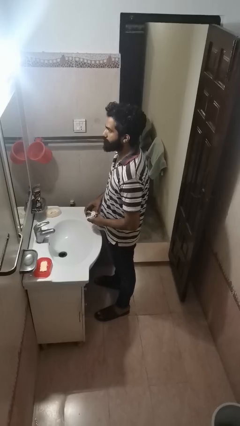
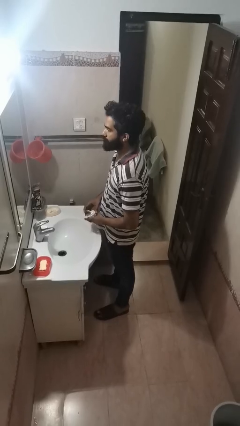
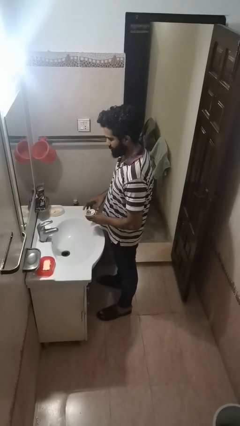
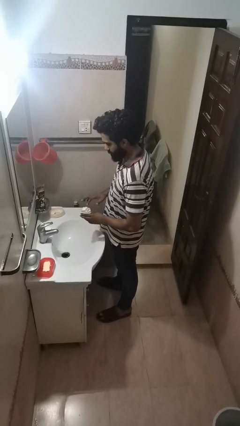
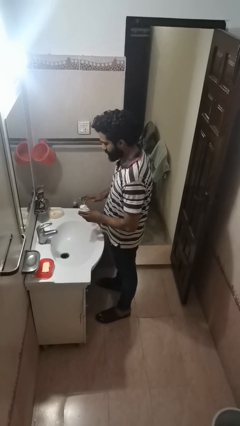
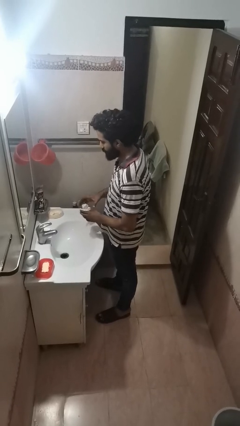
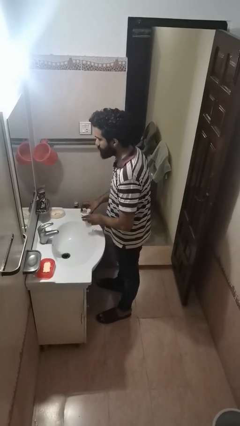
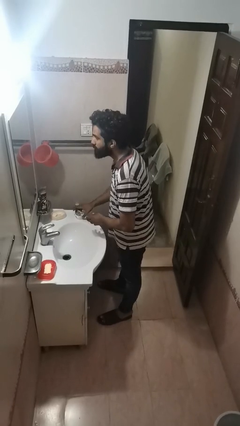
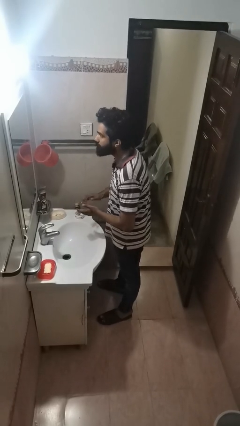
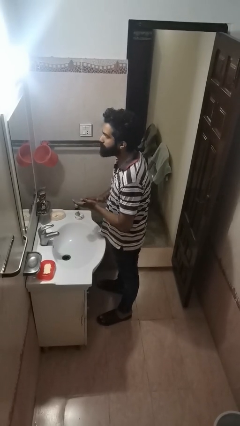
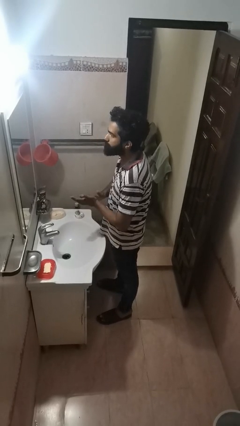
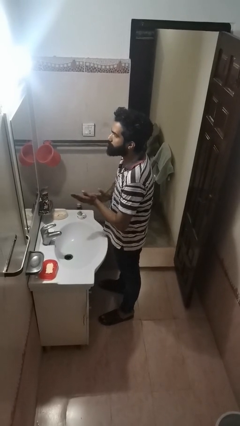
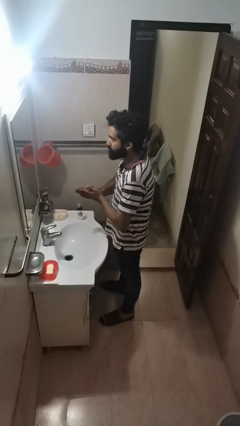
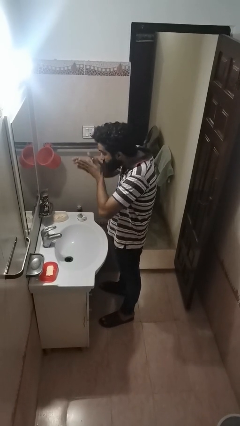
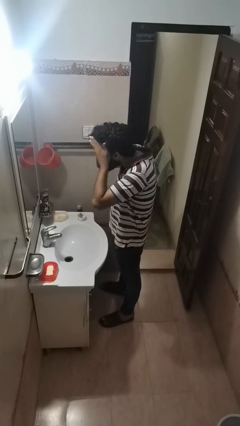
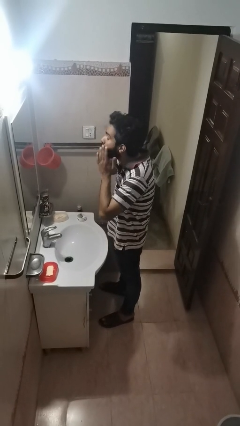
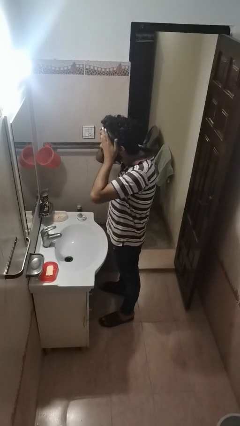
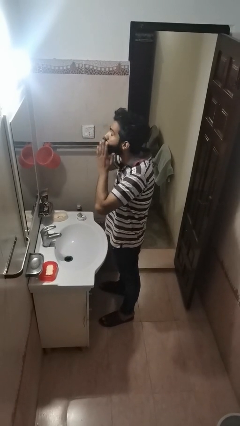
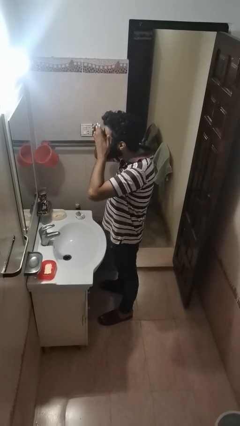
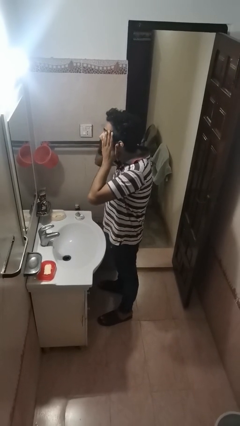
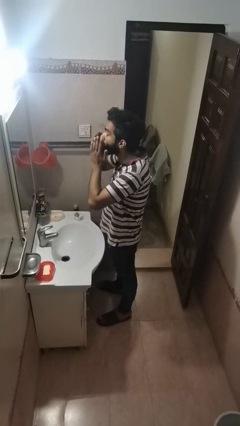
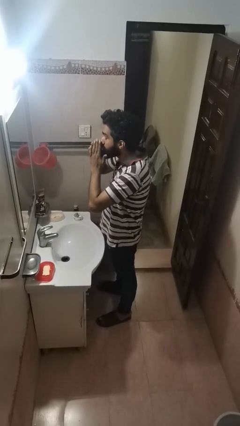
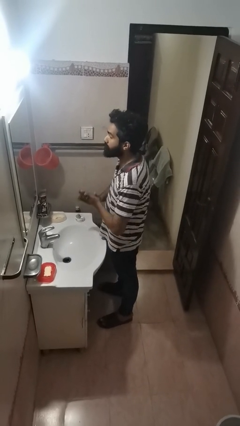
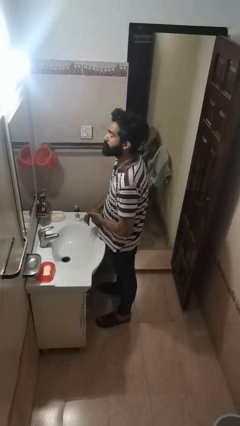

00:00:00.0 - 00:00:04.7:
person applies facial moisturizer

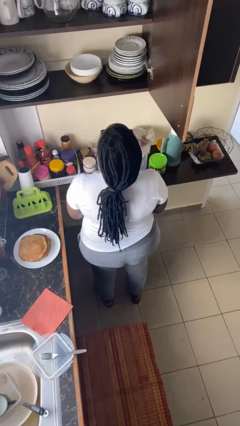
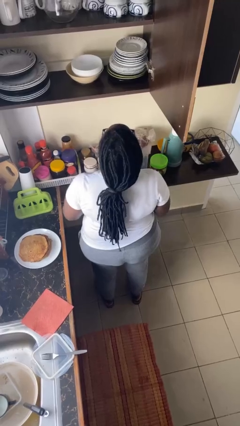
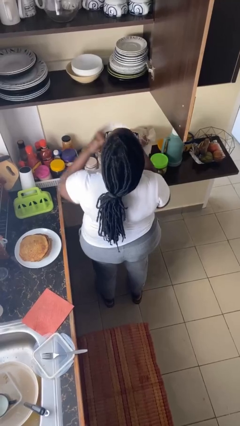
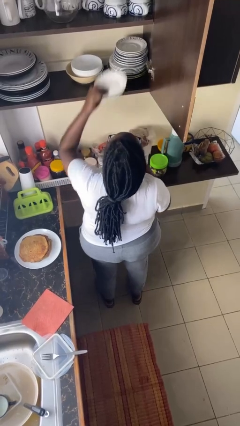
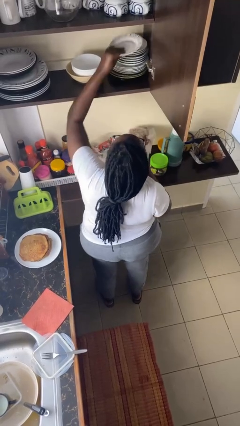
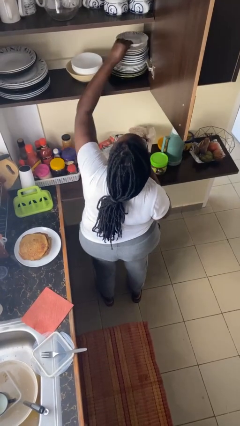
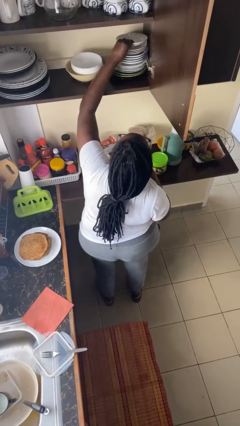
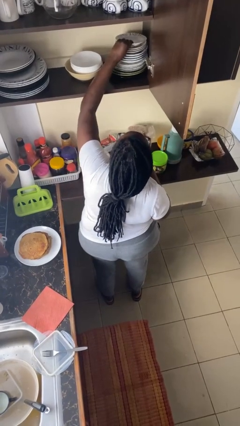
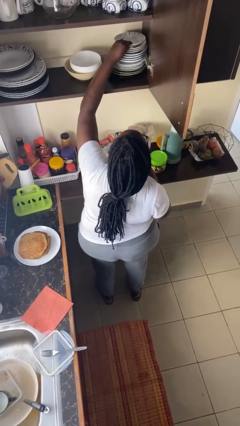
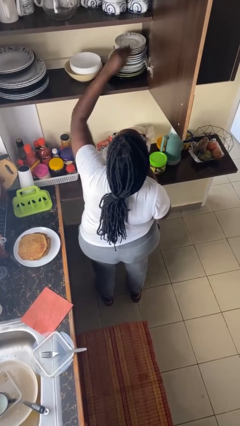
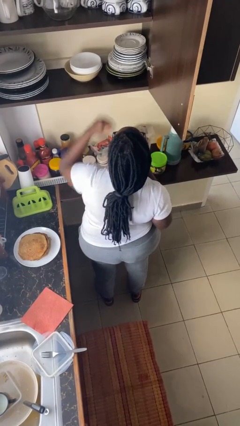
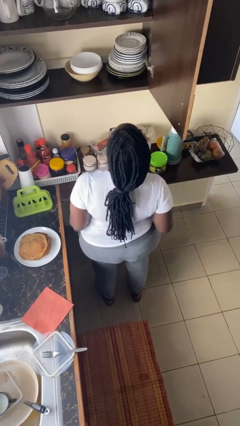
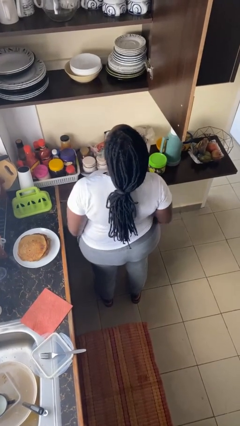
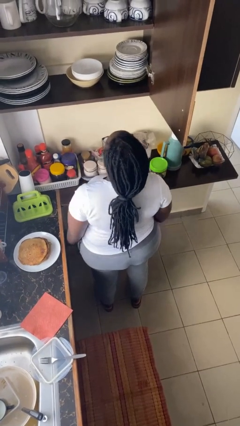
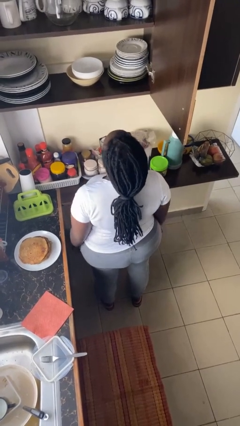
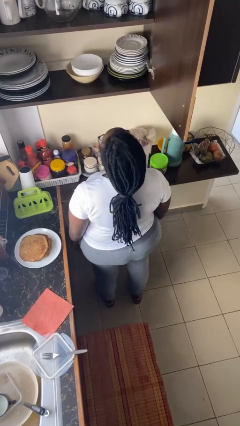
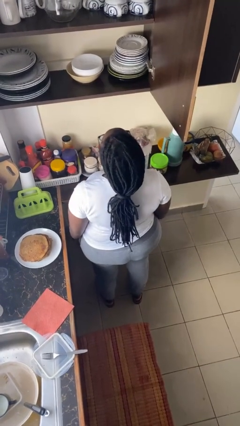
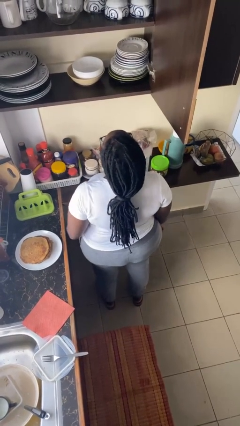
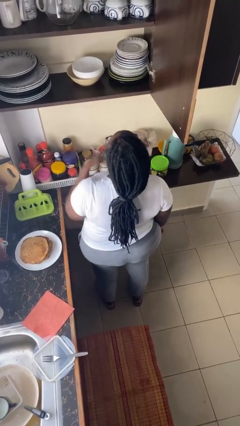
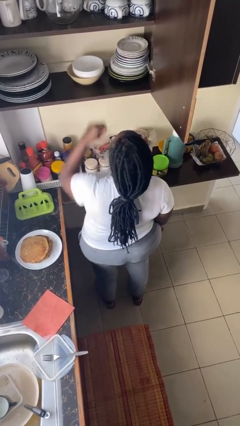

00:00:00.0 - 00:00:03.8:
person puts object in cabinet

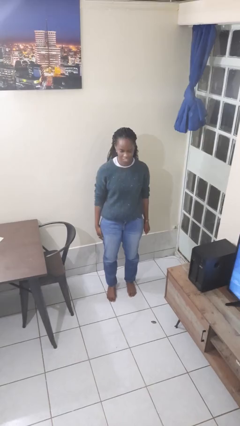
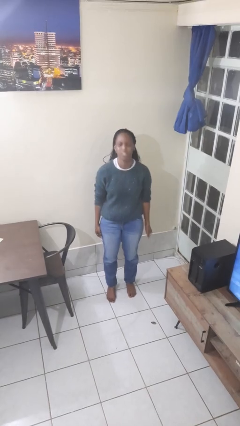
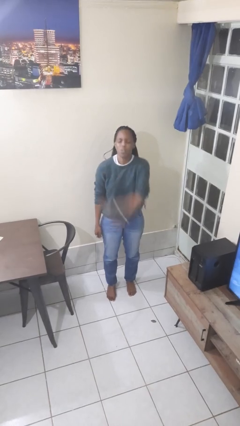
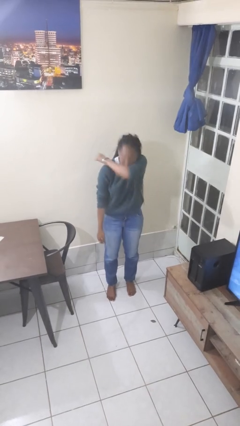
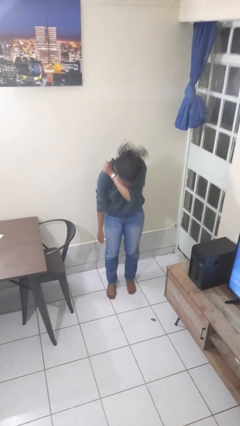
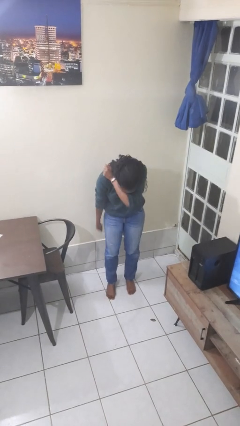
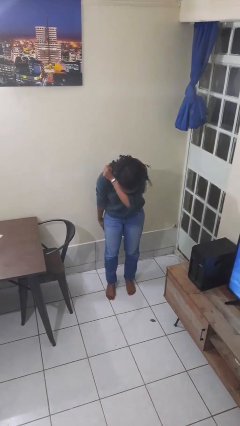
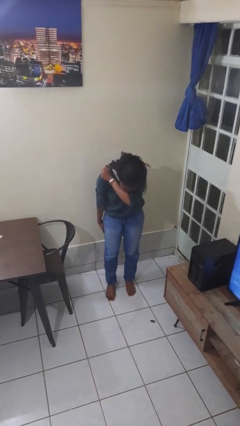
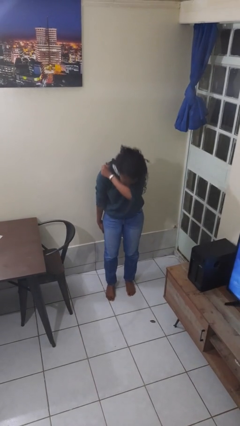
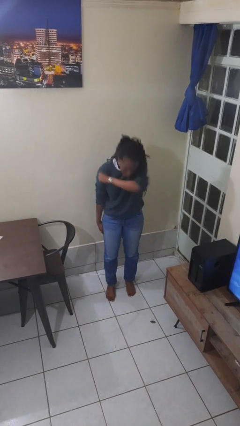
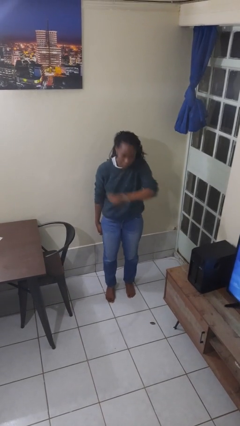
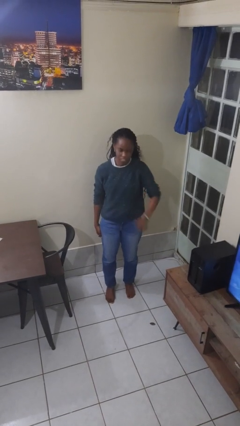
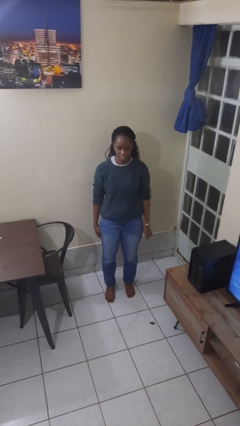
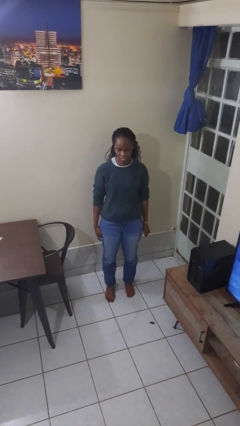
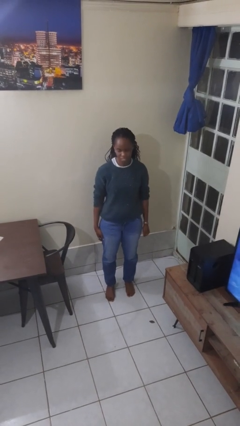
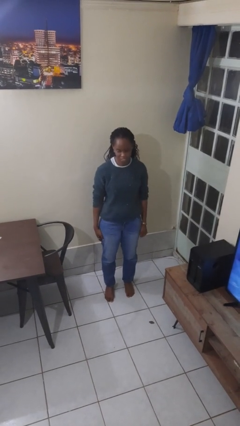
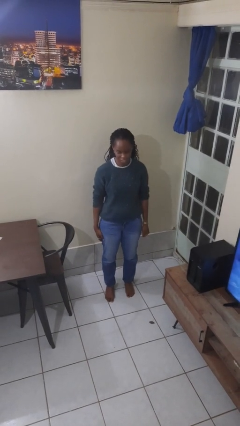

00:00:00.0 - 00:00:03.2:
person sneezes into arm

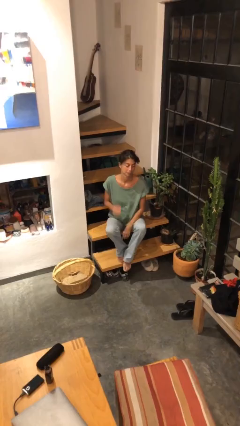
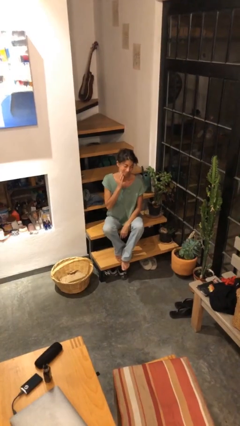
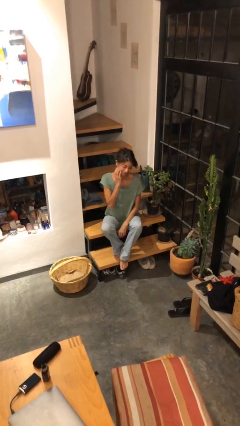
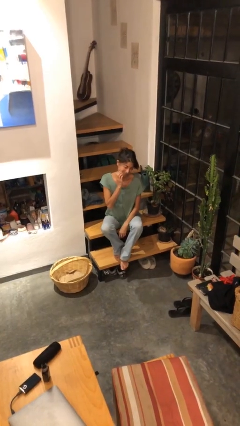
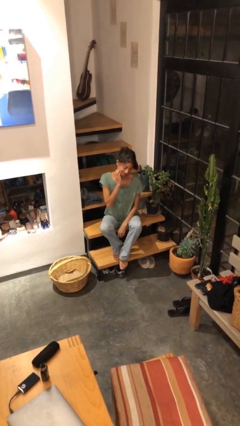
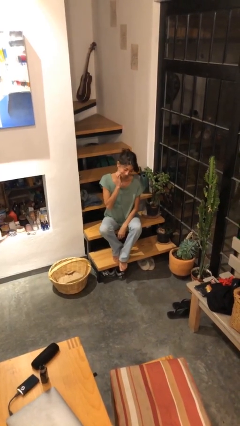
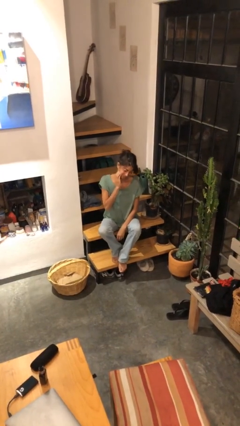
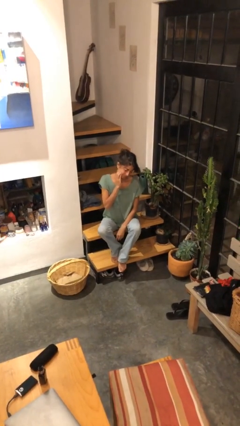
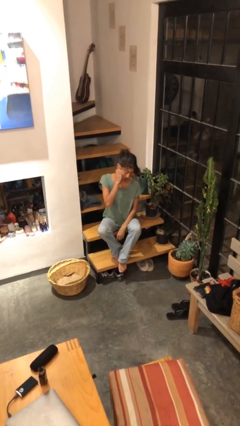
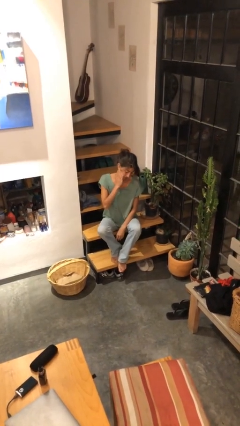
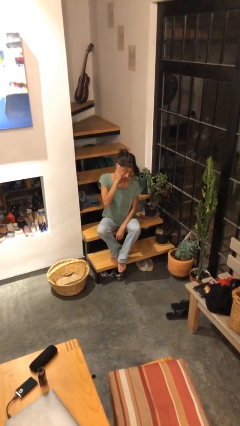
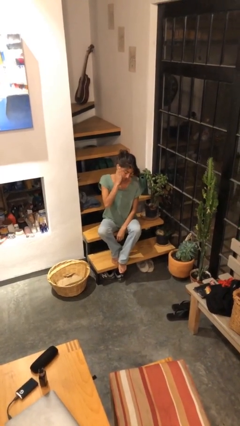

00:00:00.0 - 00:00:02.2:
person scratches face

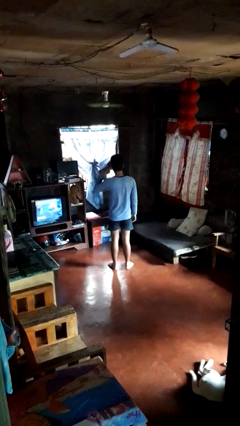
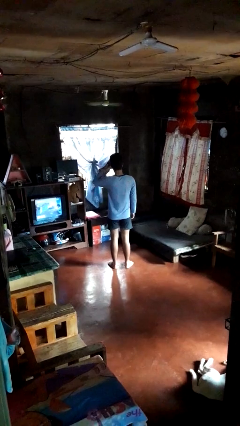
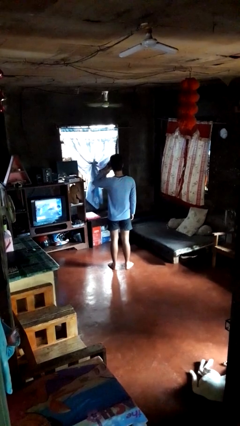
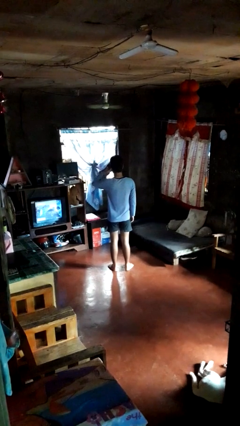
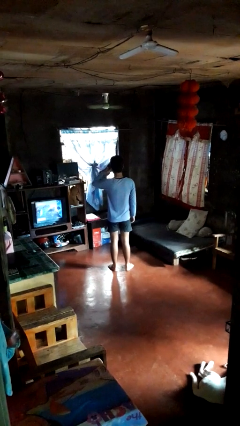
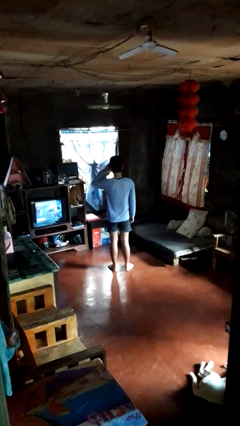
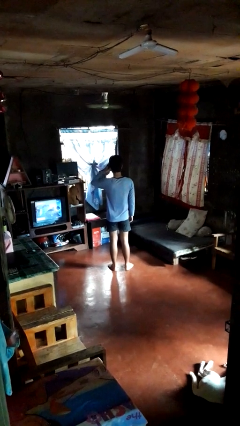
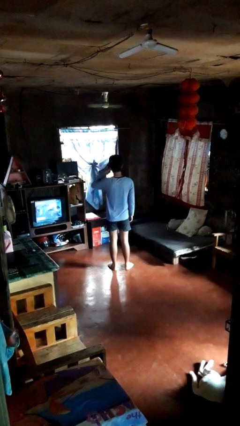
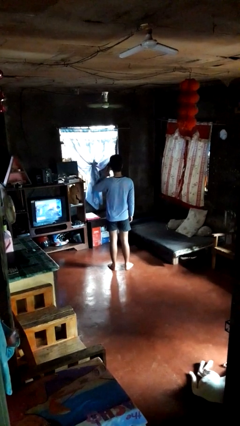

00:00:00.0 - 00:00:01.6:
person gestures call me

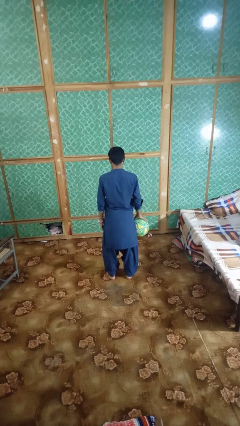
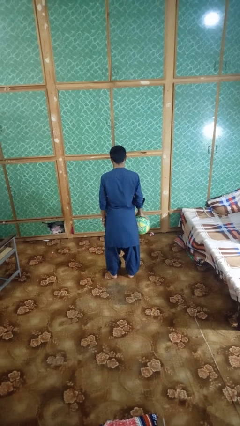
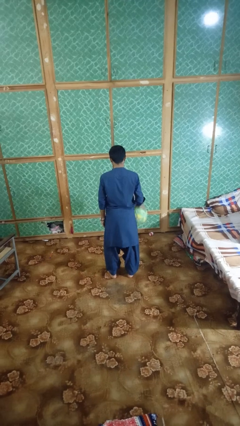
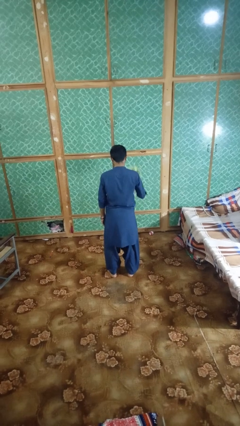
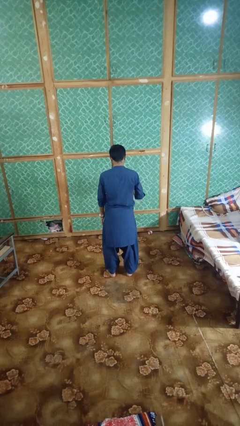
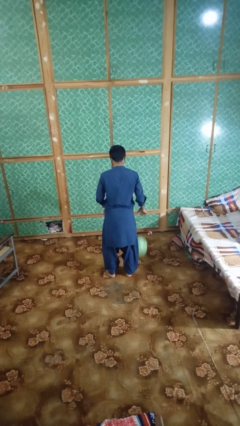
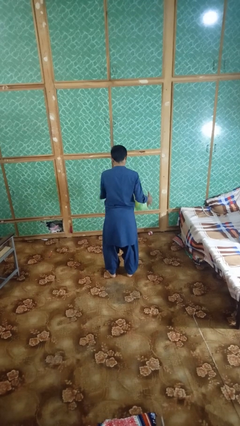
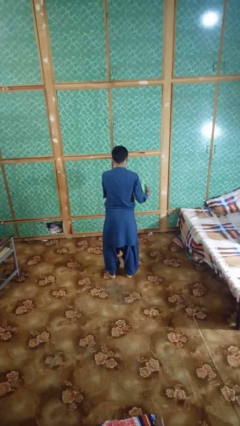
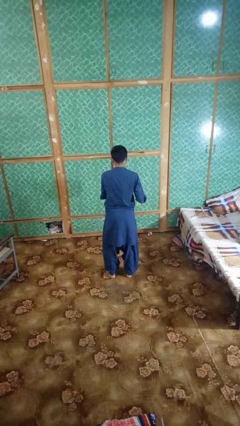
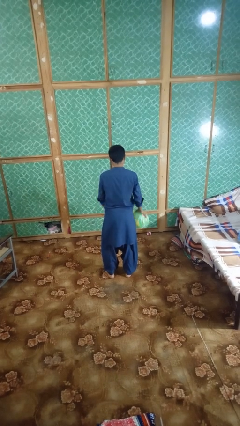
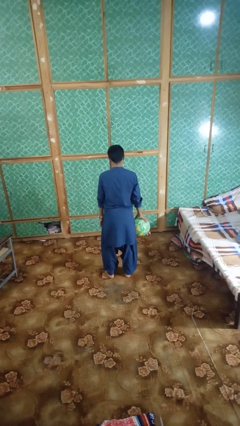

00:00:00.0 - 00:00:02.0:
person bounces ball on floor
